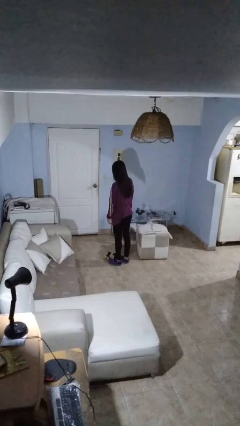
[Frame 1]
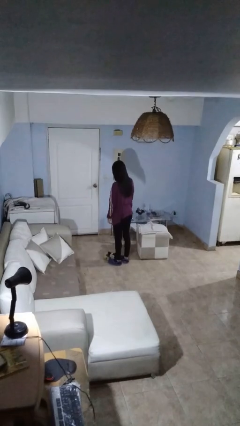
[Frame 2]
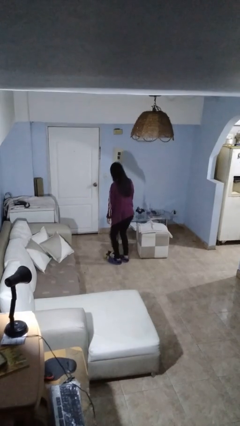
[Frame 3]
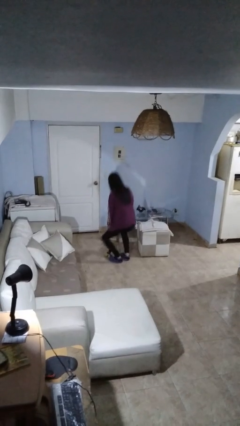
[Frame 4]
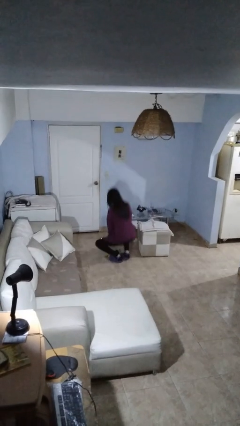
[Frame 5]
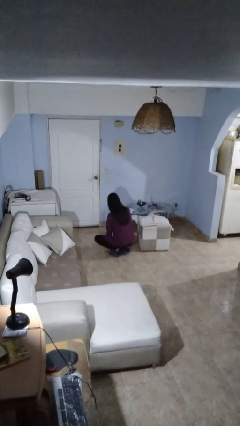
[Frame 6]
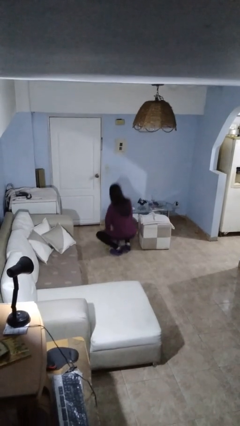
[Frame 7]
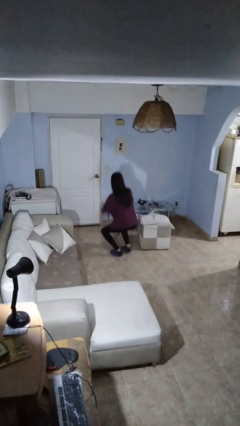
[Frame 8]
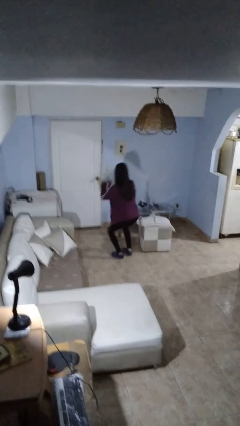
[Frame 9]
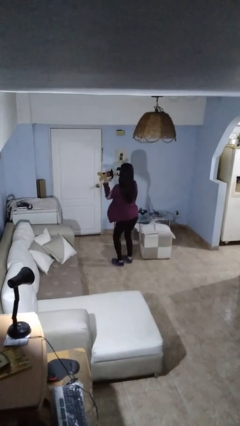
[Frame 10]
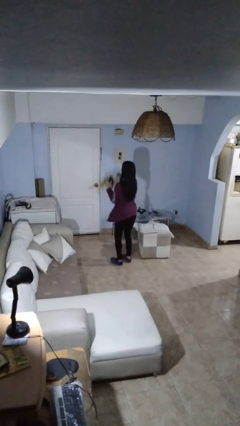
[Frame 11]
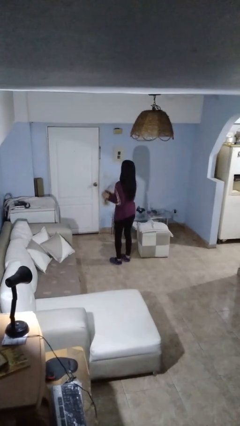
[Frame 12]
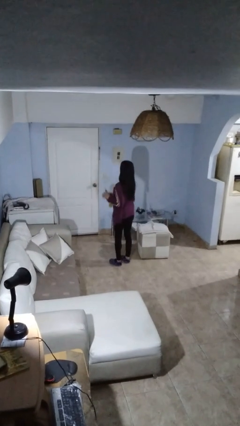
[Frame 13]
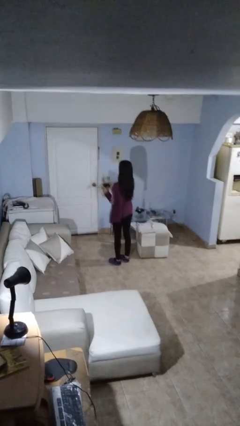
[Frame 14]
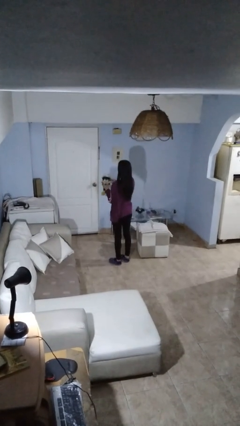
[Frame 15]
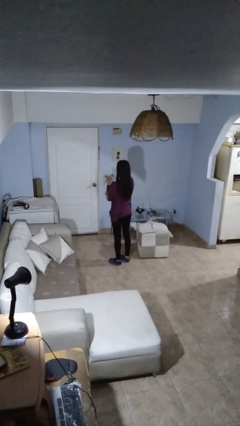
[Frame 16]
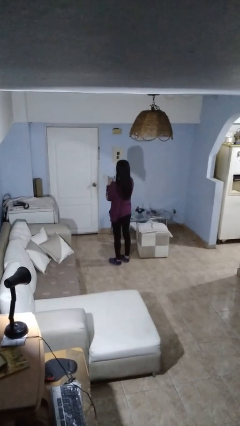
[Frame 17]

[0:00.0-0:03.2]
person picks up object from floor

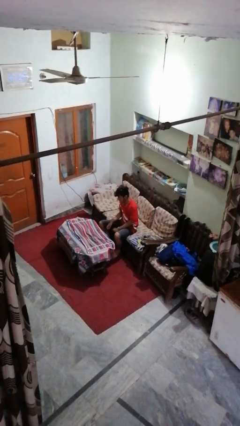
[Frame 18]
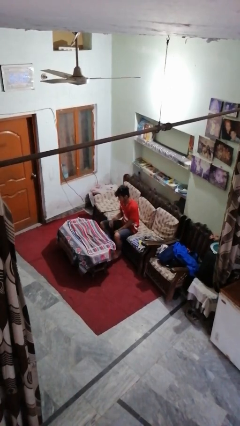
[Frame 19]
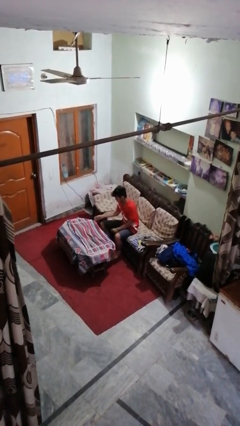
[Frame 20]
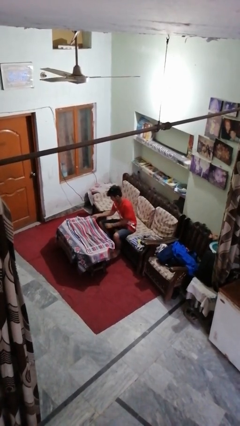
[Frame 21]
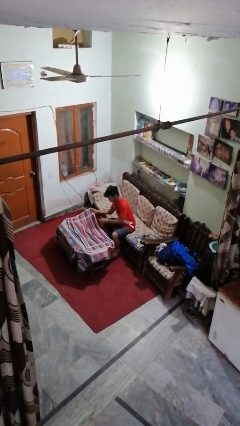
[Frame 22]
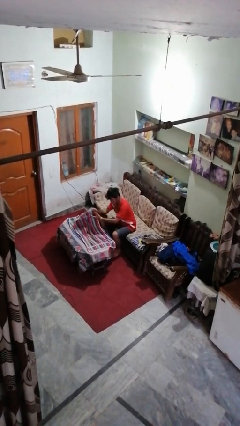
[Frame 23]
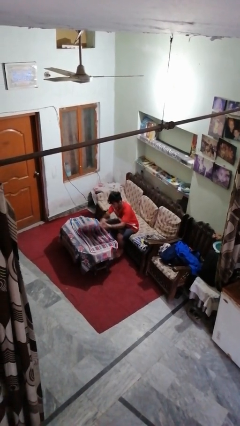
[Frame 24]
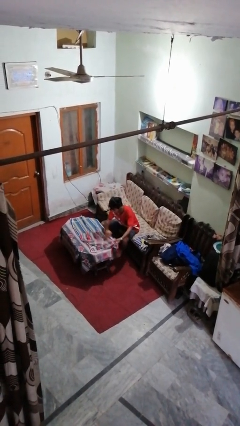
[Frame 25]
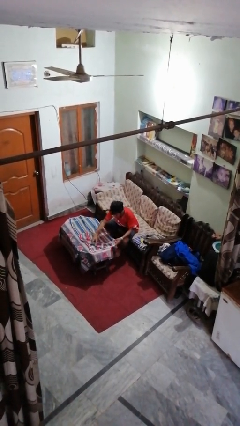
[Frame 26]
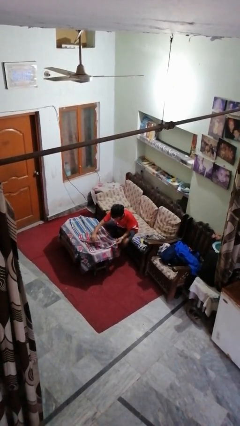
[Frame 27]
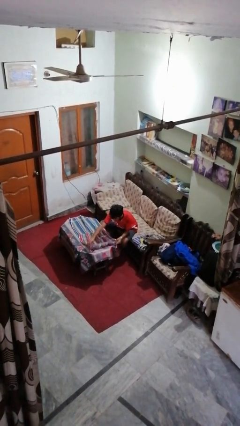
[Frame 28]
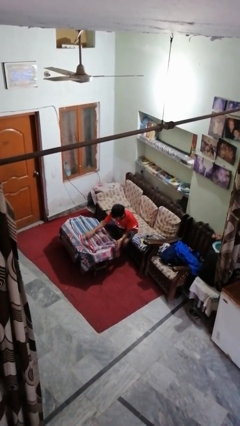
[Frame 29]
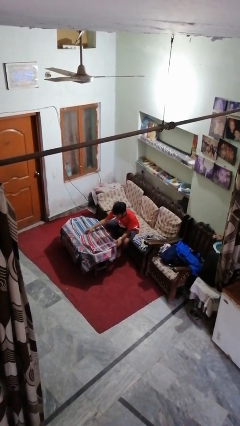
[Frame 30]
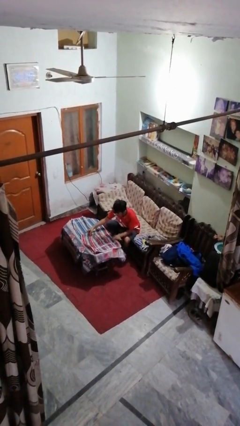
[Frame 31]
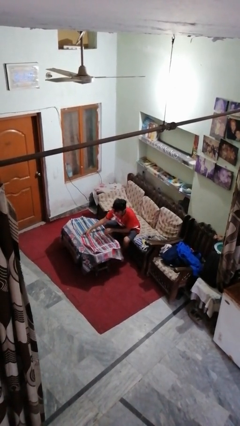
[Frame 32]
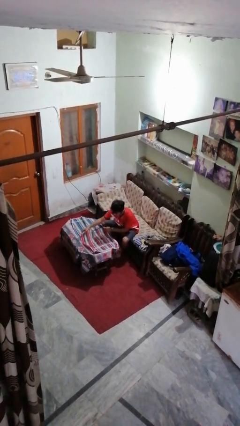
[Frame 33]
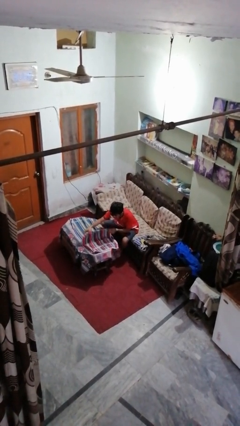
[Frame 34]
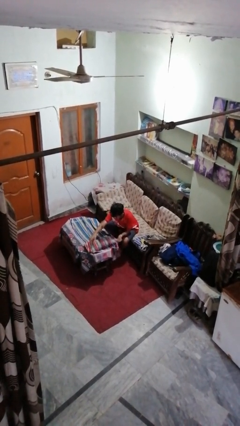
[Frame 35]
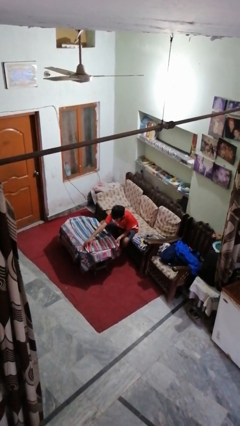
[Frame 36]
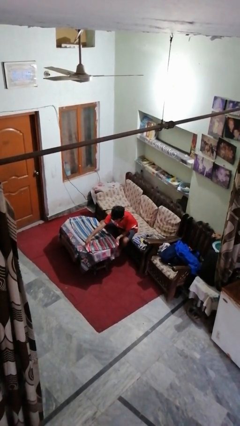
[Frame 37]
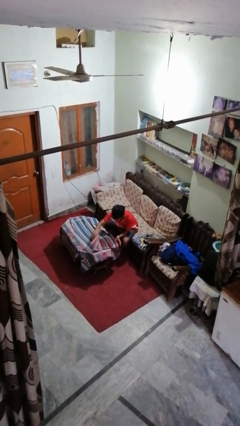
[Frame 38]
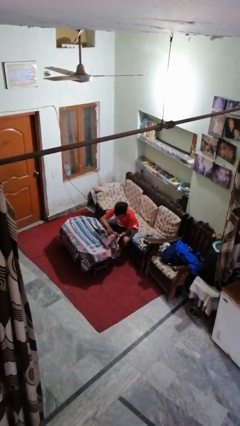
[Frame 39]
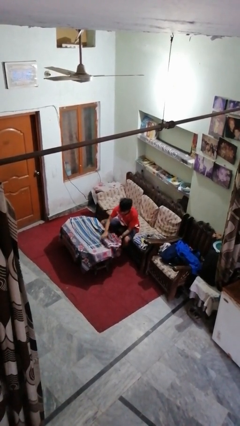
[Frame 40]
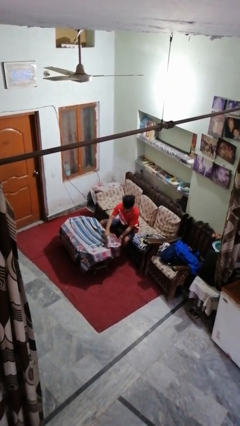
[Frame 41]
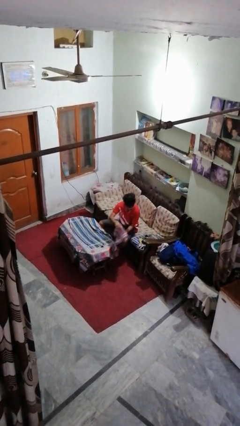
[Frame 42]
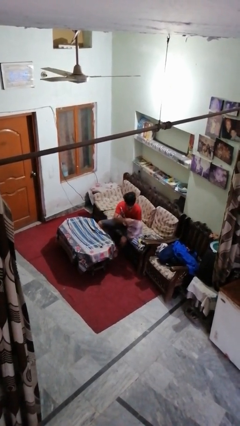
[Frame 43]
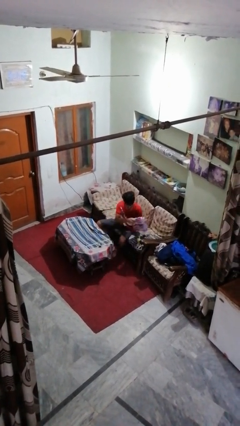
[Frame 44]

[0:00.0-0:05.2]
person folds towel

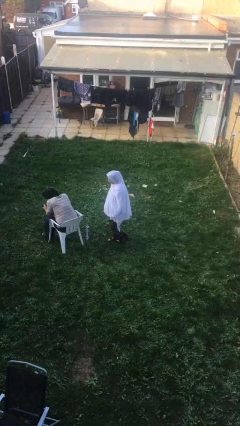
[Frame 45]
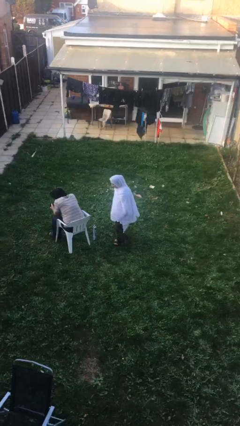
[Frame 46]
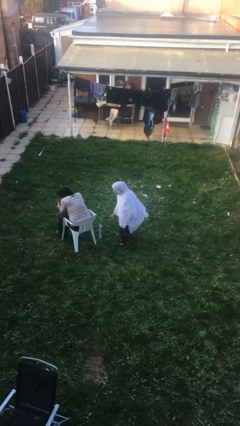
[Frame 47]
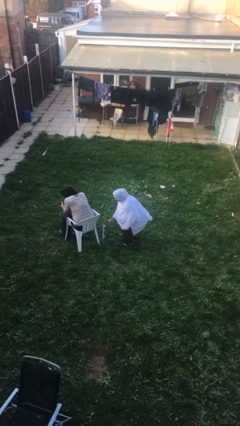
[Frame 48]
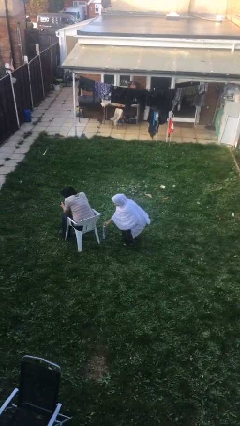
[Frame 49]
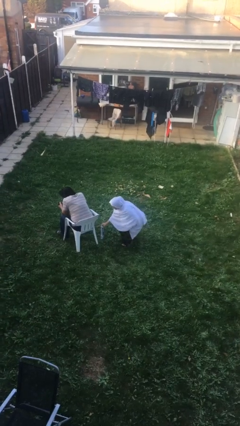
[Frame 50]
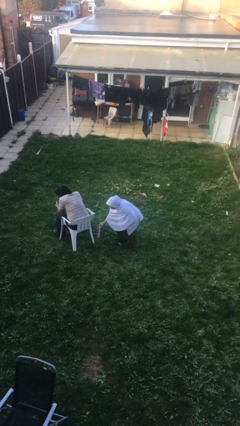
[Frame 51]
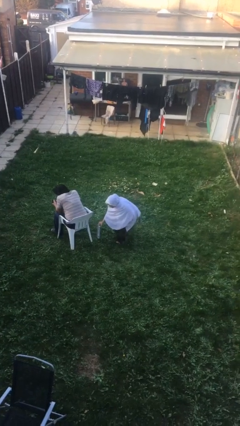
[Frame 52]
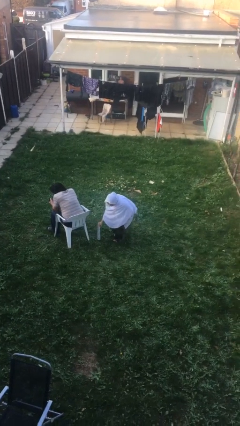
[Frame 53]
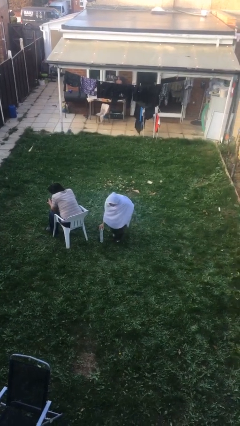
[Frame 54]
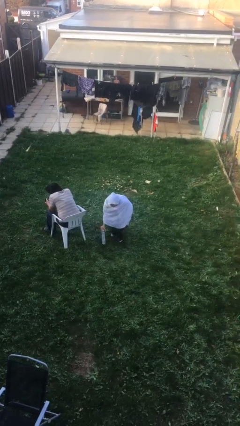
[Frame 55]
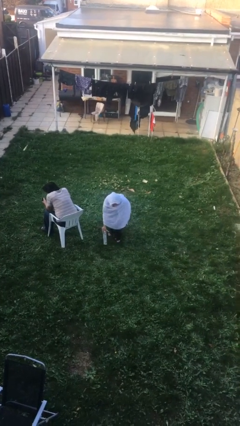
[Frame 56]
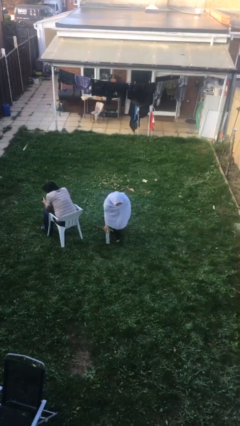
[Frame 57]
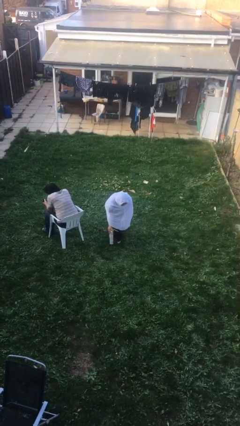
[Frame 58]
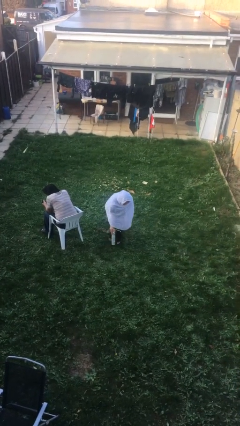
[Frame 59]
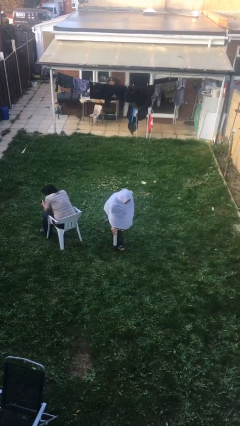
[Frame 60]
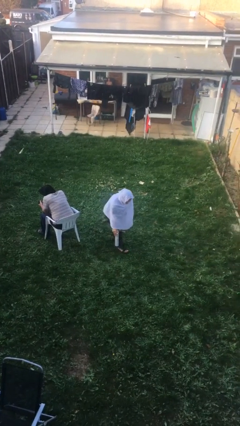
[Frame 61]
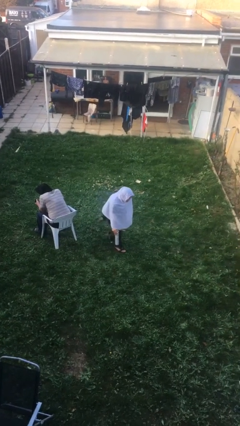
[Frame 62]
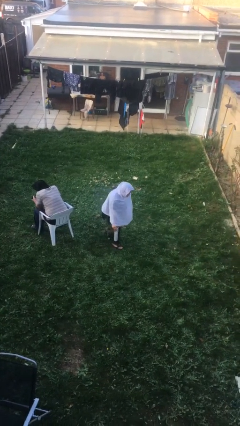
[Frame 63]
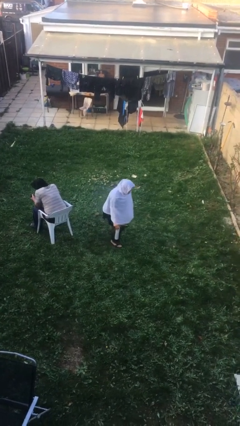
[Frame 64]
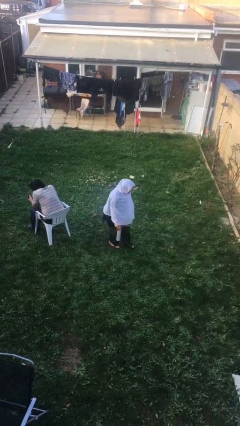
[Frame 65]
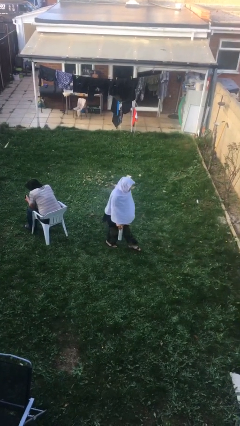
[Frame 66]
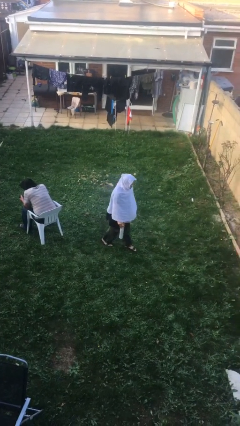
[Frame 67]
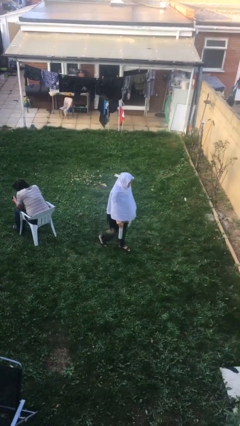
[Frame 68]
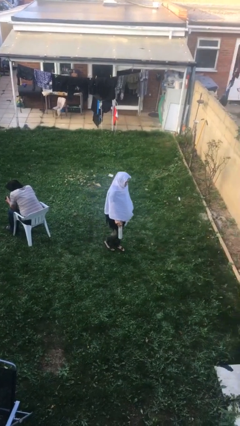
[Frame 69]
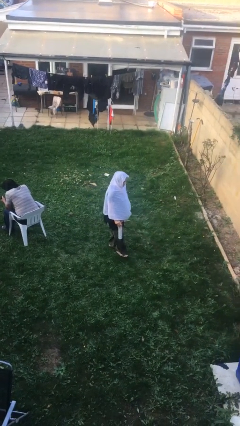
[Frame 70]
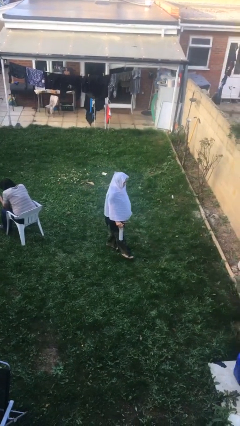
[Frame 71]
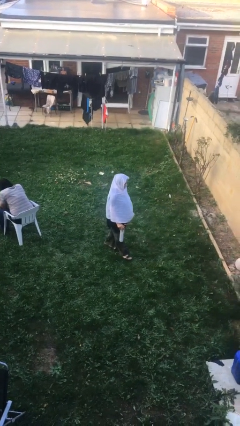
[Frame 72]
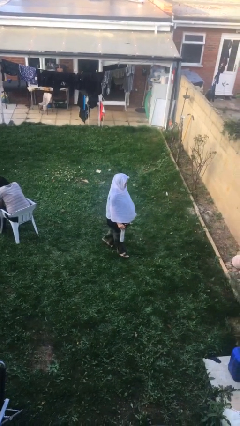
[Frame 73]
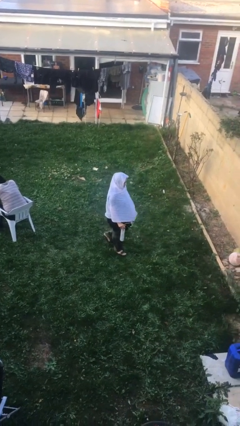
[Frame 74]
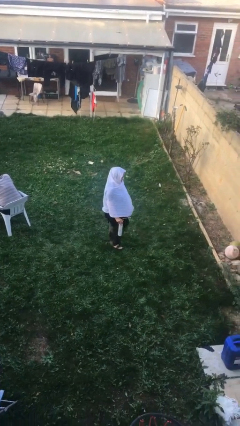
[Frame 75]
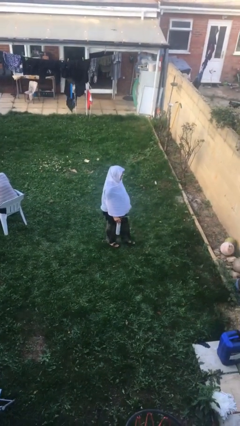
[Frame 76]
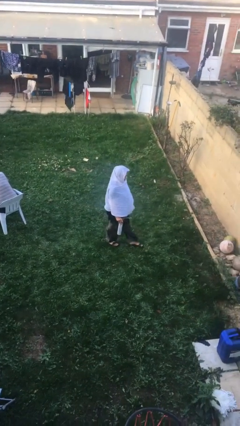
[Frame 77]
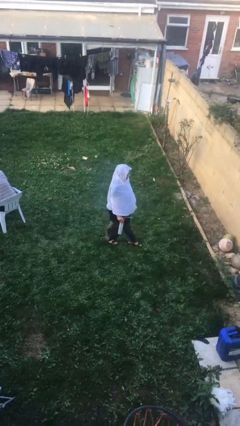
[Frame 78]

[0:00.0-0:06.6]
person steals object from person

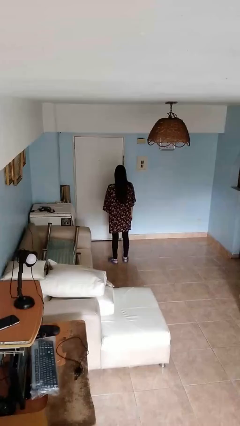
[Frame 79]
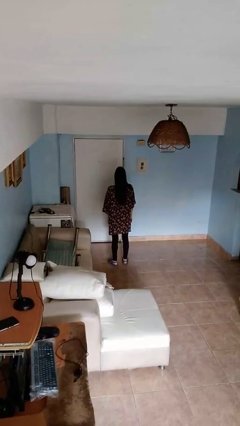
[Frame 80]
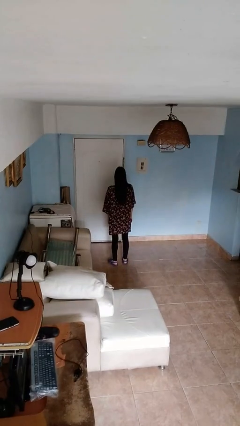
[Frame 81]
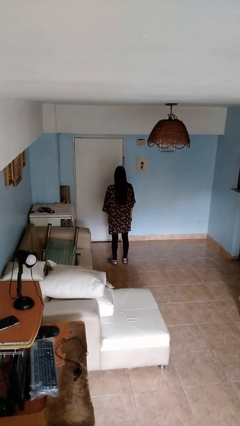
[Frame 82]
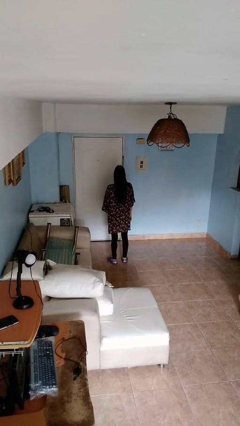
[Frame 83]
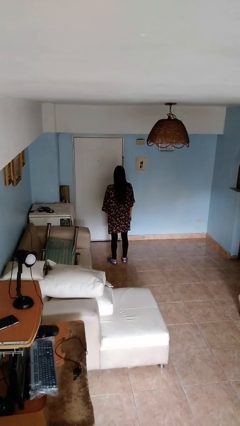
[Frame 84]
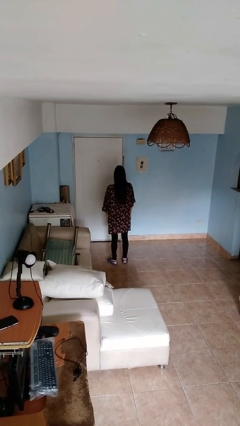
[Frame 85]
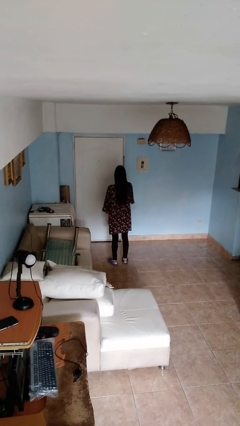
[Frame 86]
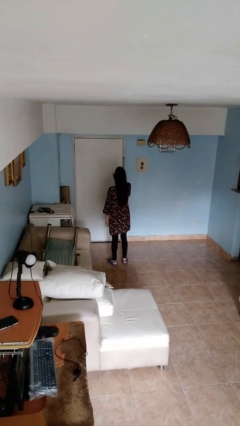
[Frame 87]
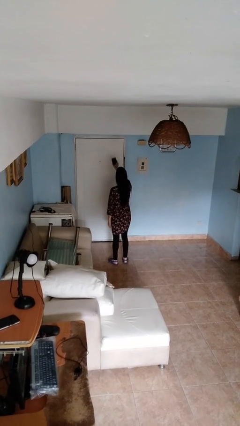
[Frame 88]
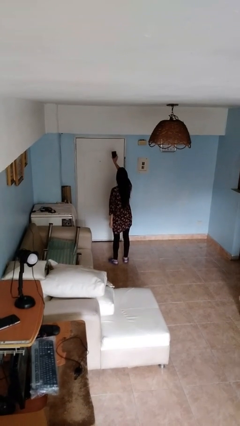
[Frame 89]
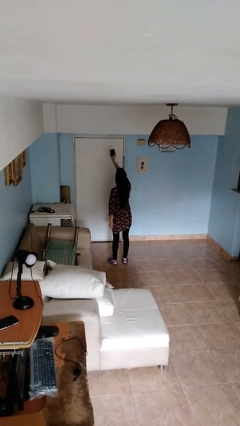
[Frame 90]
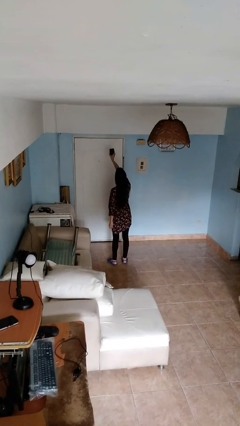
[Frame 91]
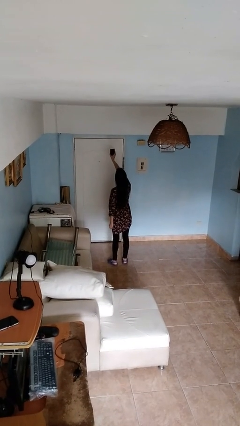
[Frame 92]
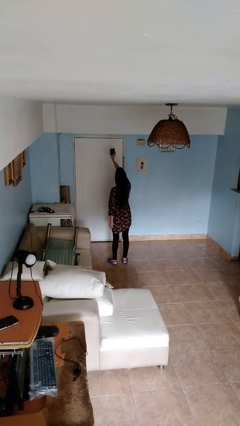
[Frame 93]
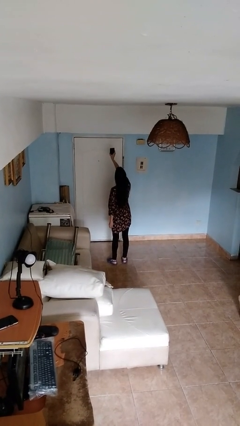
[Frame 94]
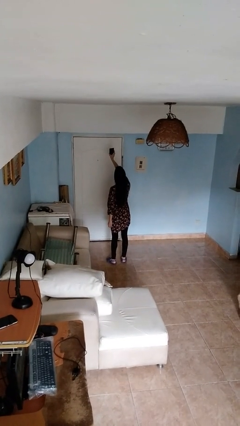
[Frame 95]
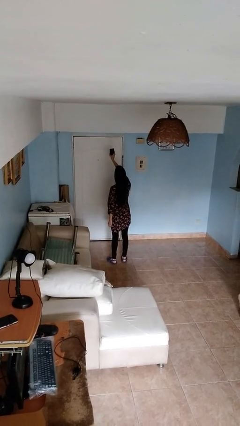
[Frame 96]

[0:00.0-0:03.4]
person takes selfie
